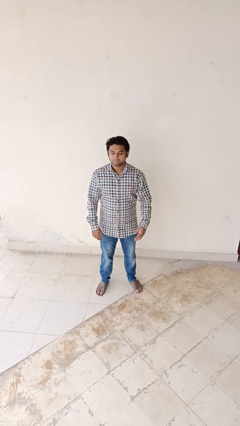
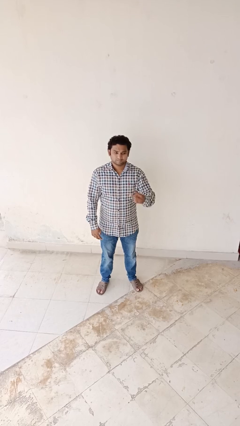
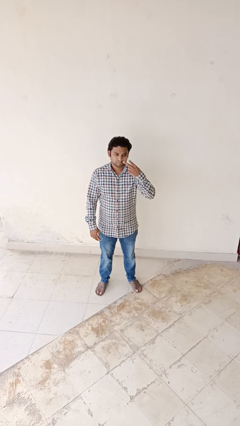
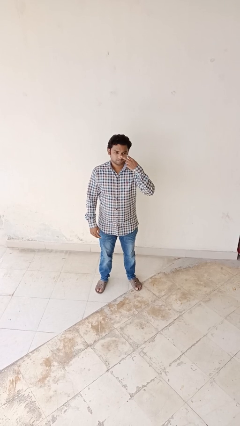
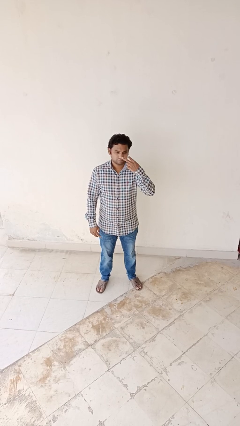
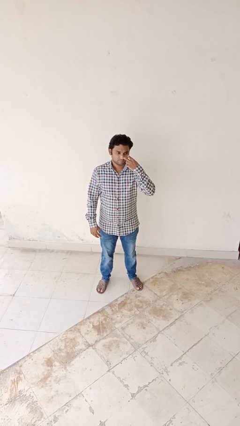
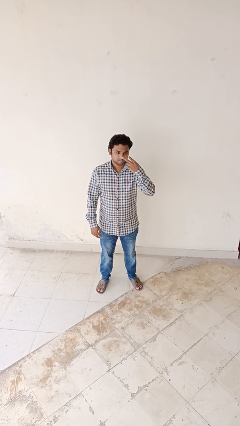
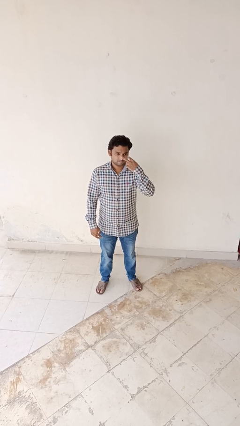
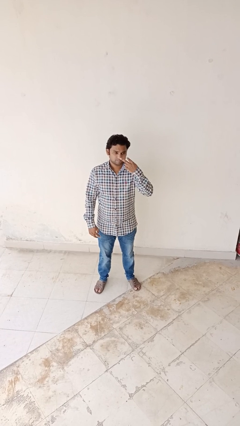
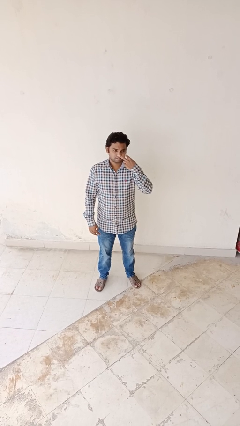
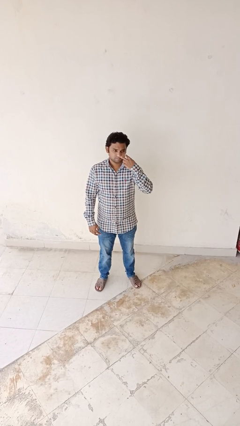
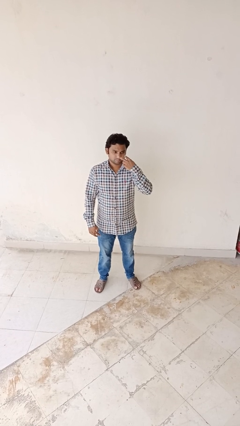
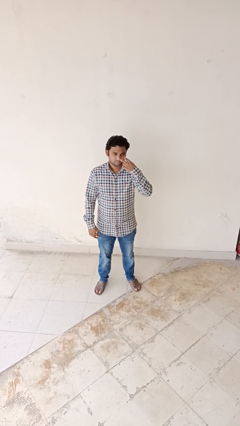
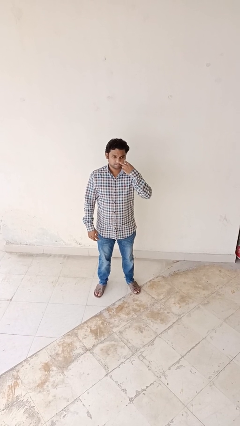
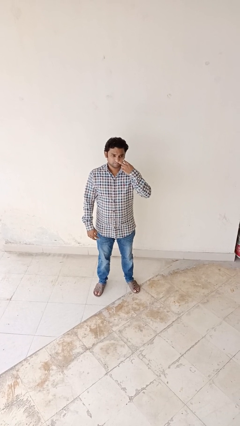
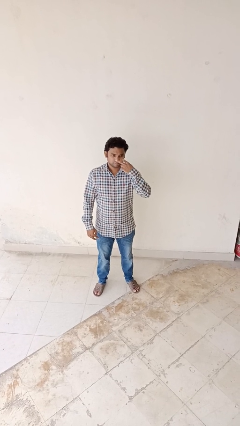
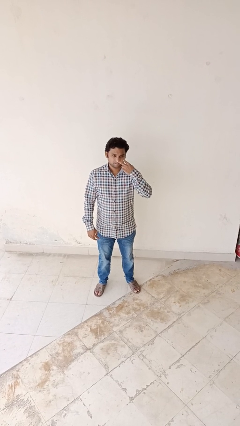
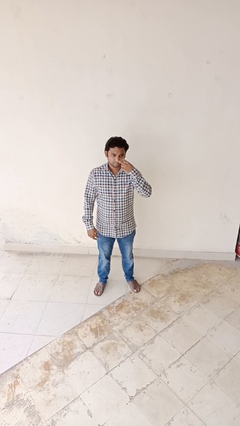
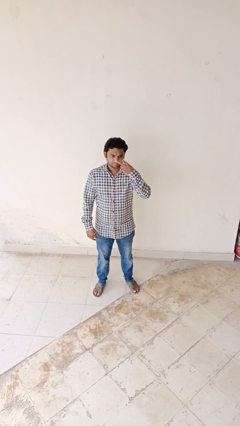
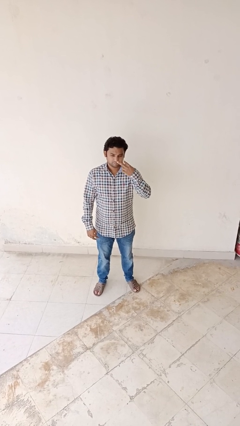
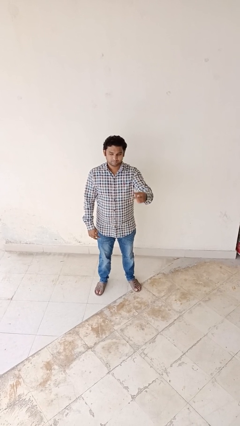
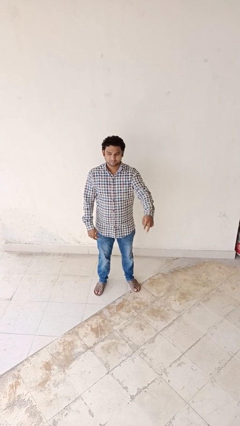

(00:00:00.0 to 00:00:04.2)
person gestures watch closely

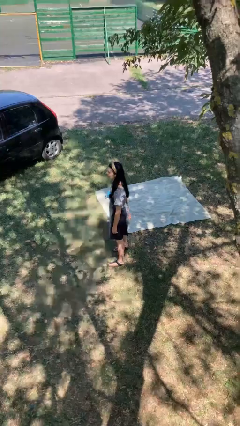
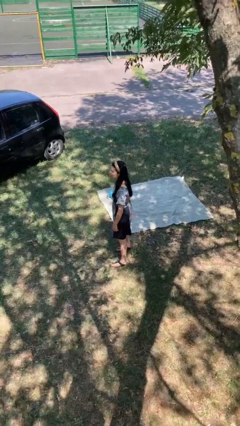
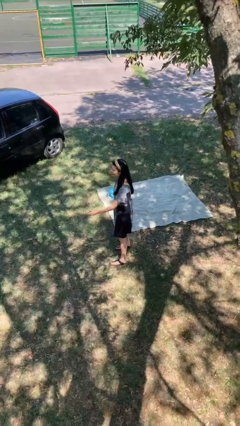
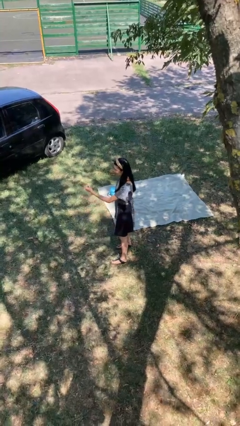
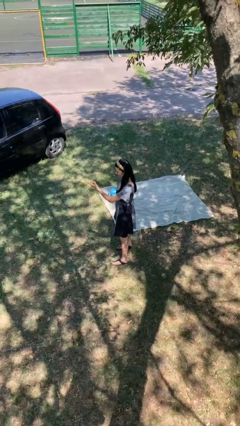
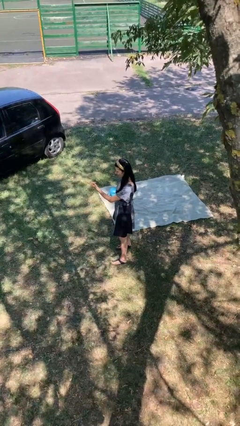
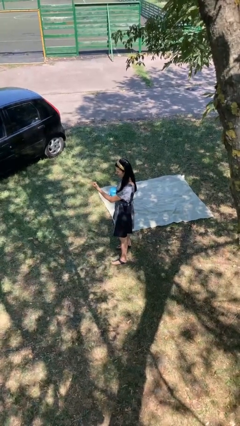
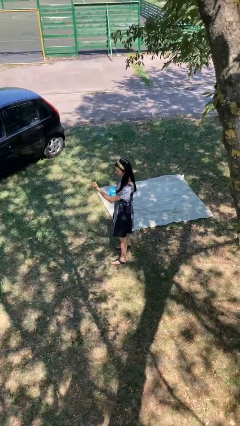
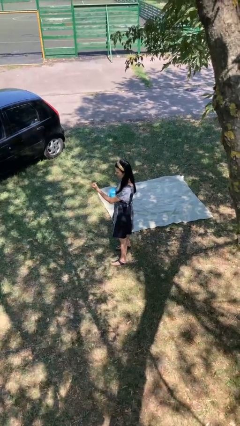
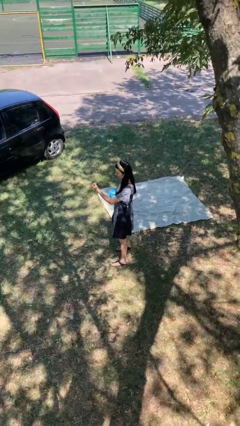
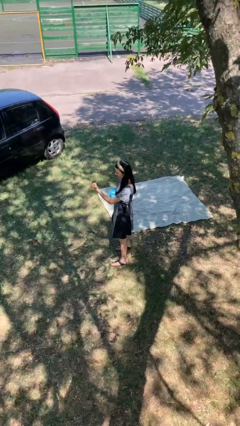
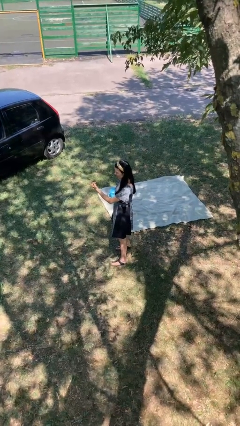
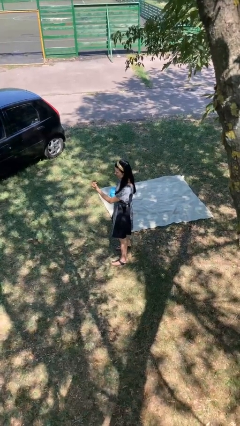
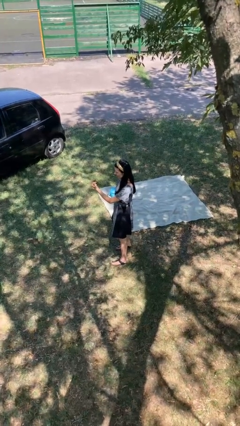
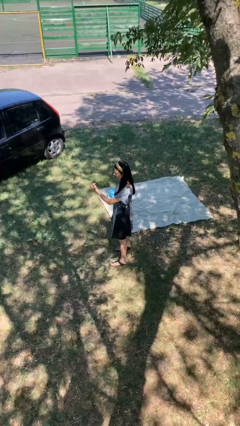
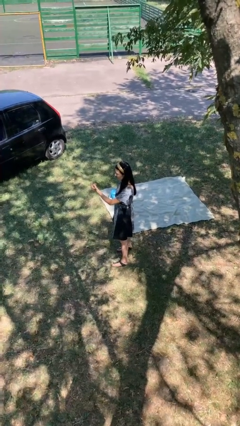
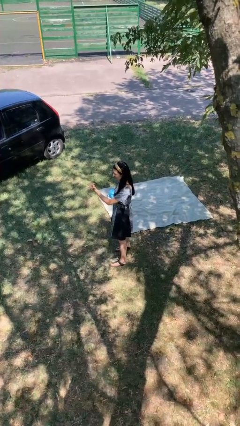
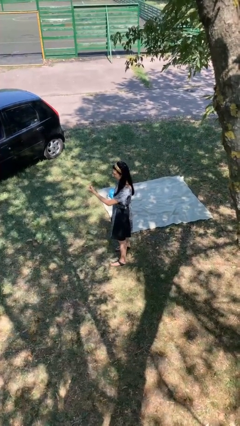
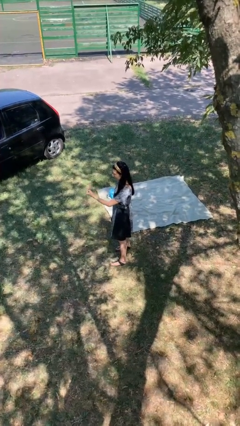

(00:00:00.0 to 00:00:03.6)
person gestures come here

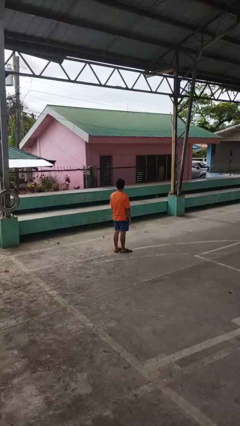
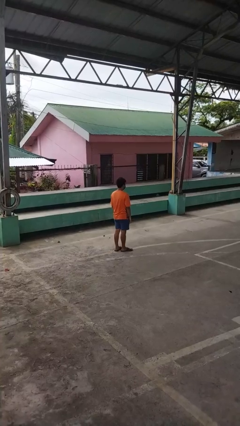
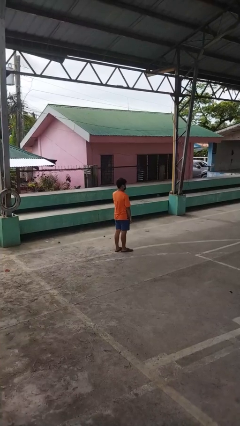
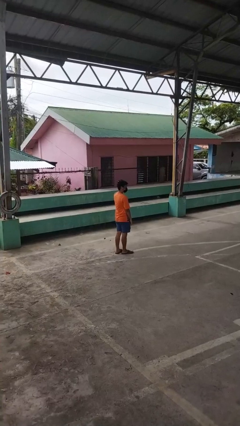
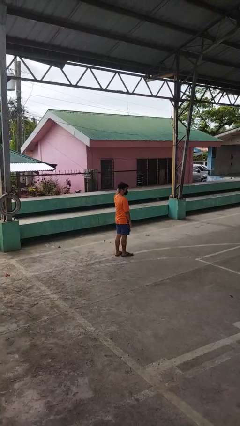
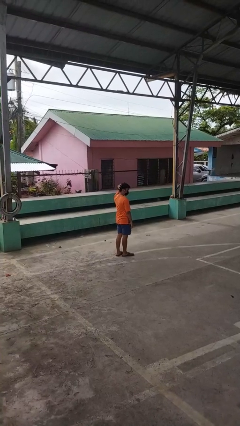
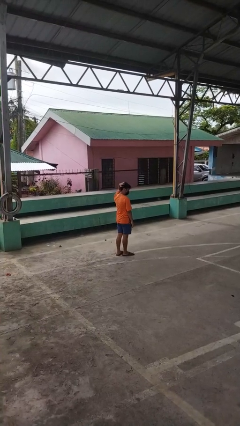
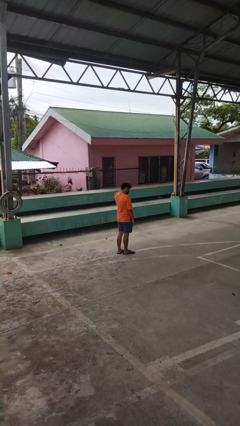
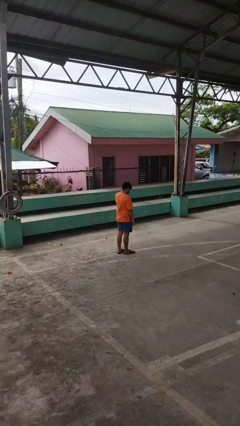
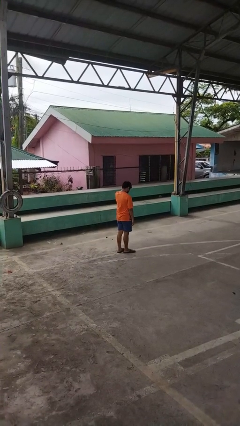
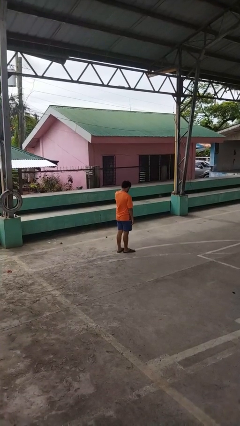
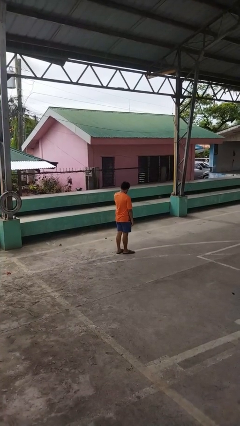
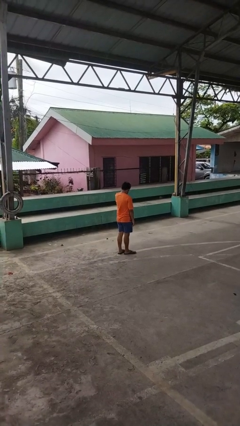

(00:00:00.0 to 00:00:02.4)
person scratches face

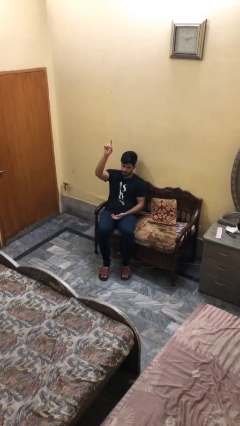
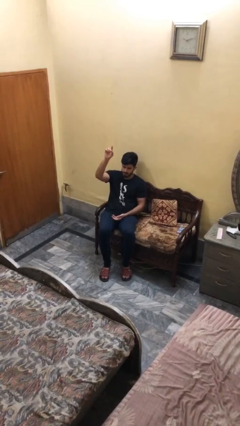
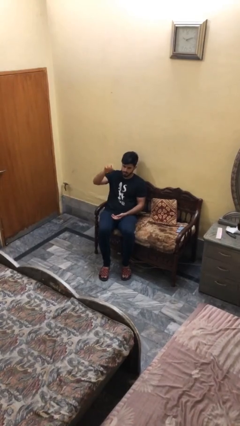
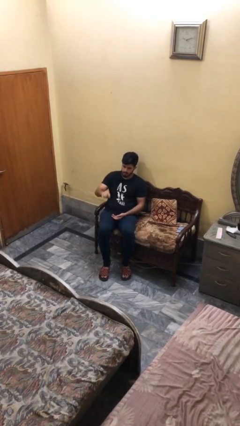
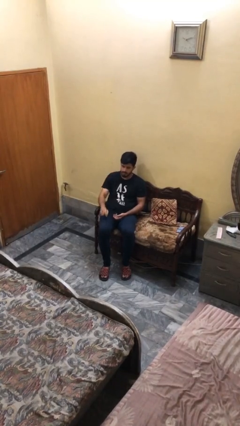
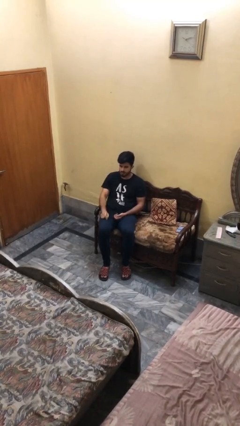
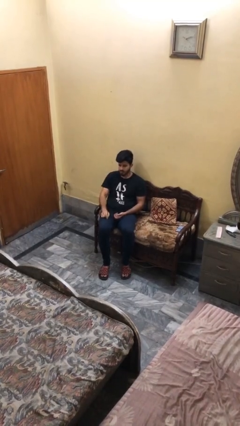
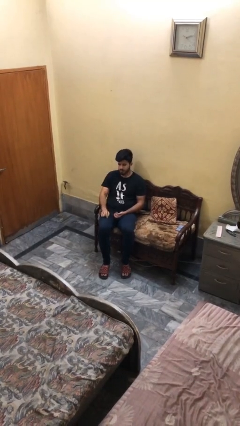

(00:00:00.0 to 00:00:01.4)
person gestures lower hand

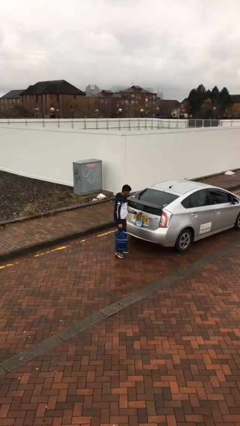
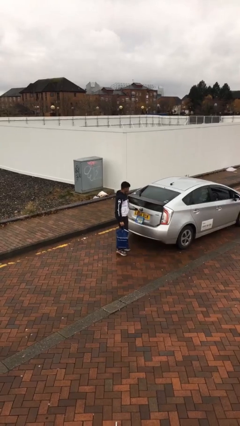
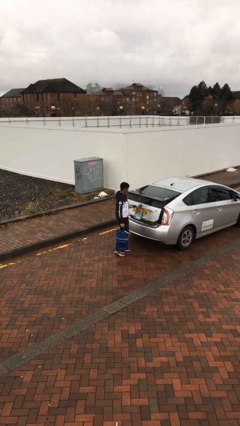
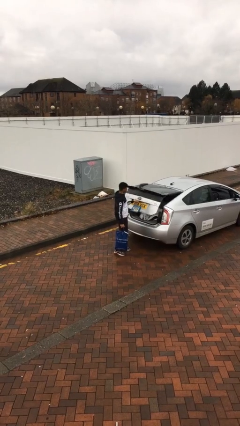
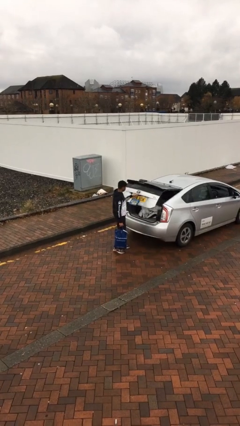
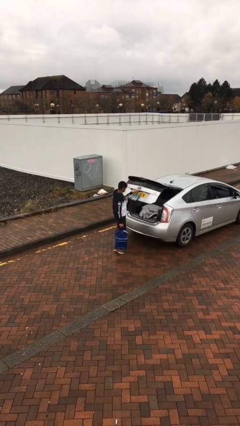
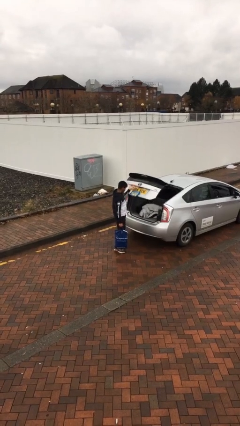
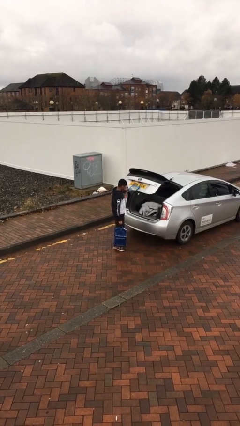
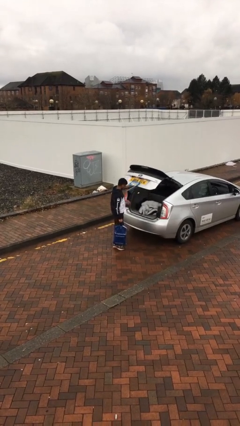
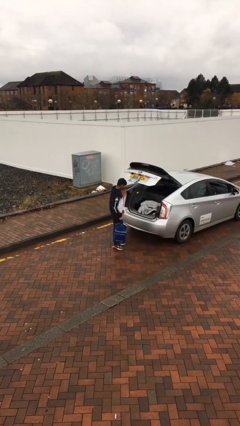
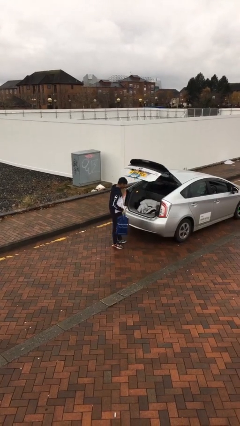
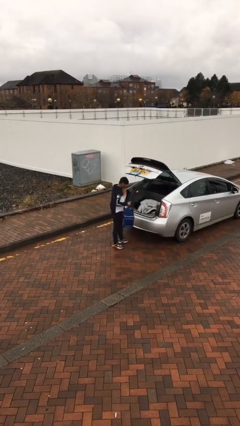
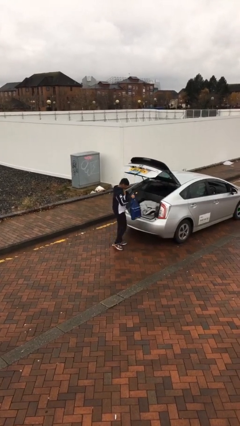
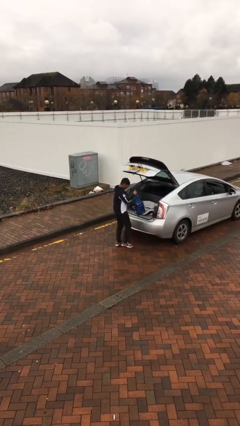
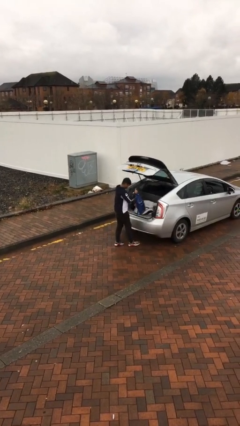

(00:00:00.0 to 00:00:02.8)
person opens car trunk

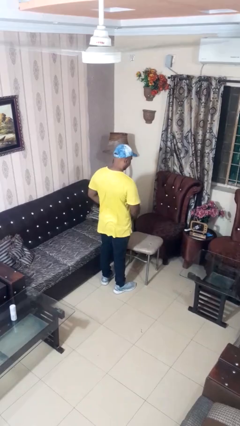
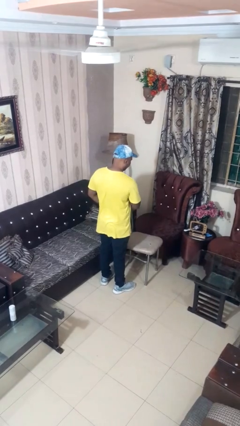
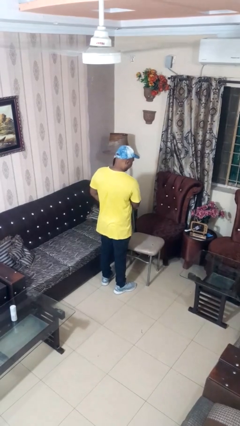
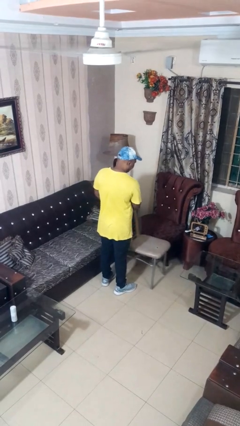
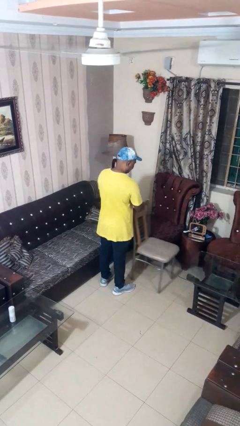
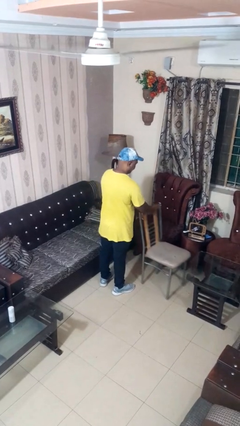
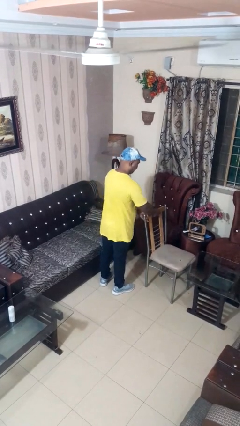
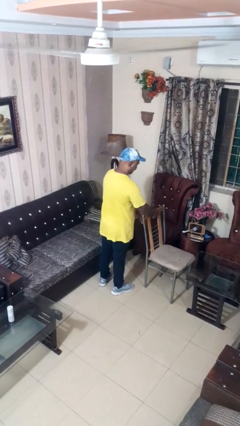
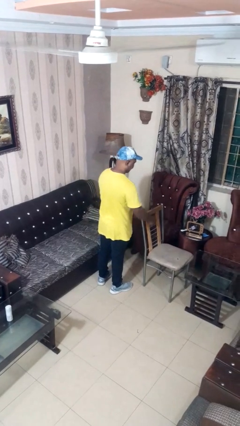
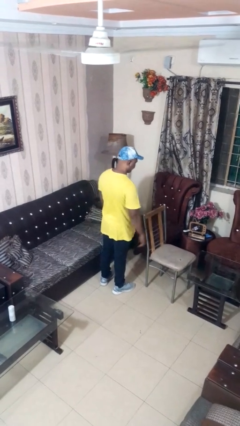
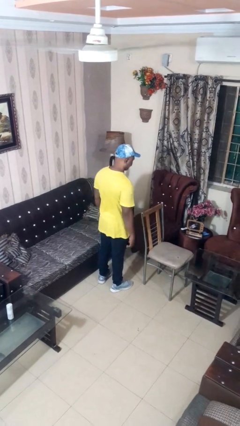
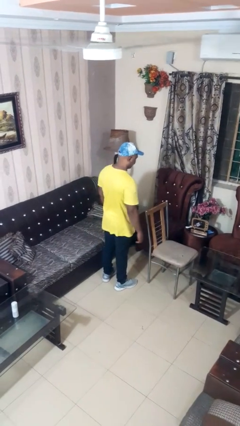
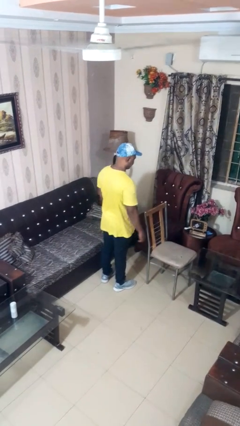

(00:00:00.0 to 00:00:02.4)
person pushes in chair

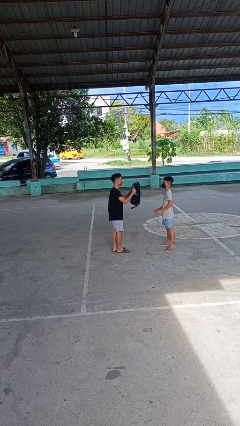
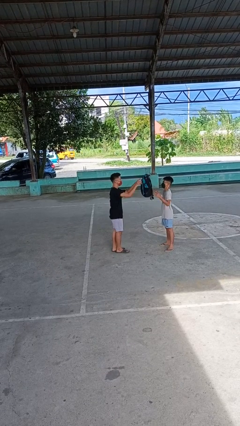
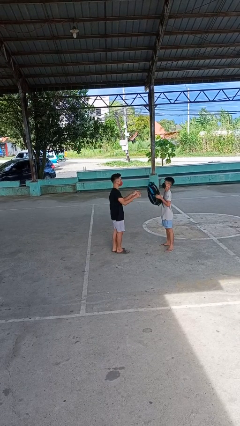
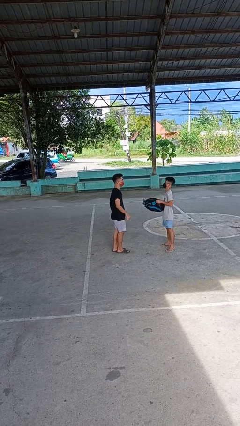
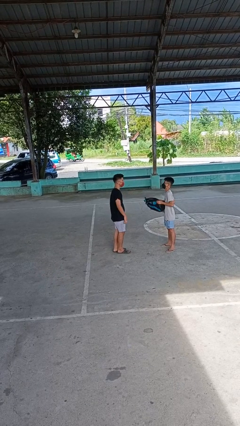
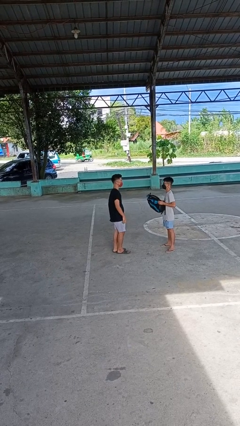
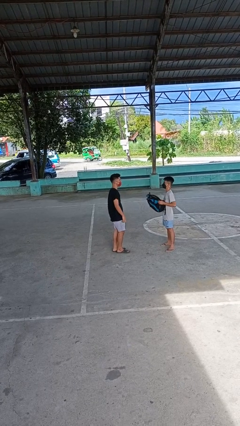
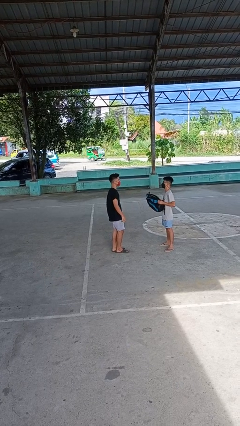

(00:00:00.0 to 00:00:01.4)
person throws object to person
